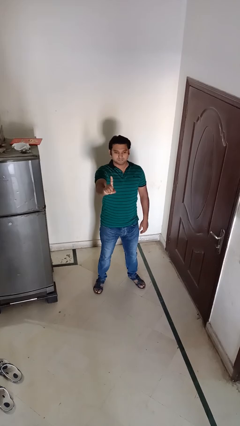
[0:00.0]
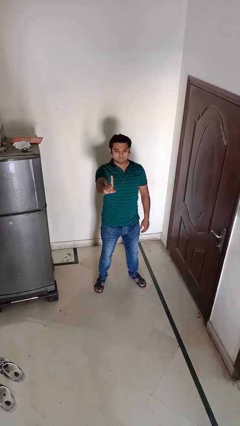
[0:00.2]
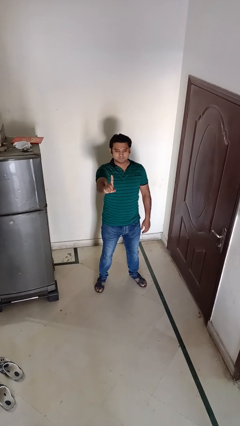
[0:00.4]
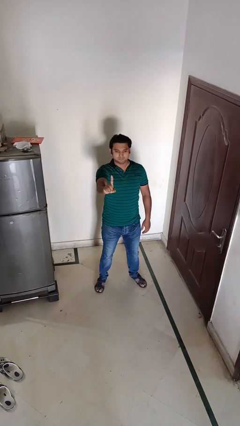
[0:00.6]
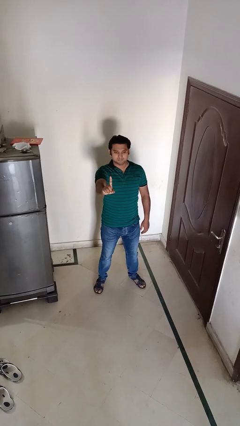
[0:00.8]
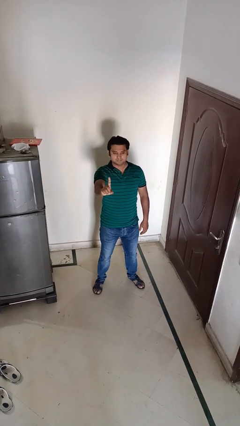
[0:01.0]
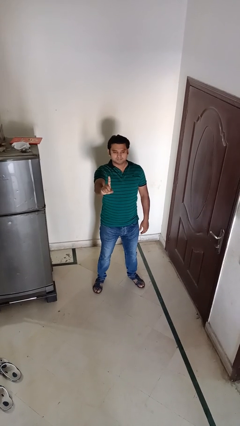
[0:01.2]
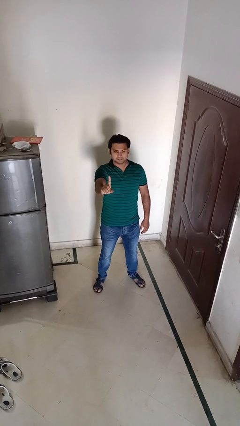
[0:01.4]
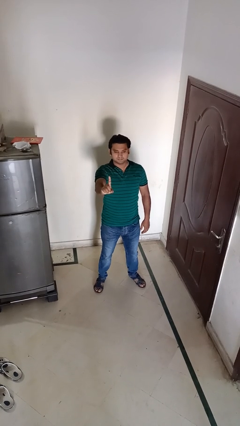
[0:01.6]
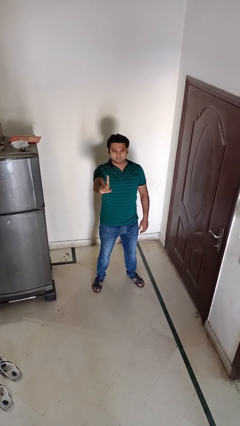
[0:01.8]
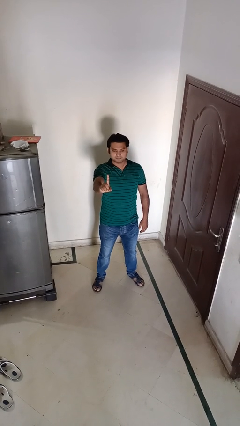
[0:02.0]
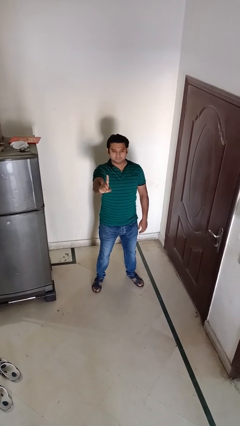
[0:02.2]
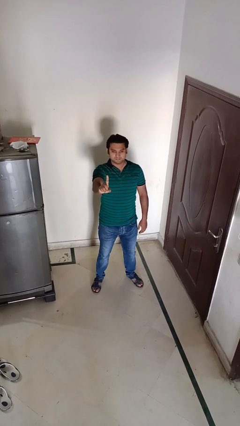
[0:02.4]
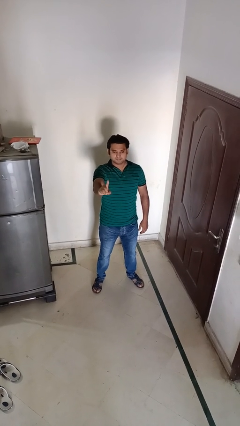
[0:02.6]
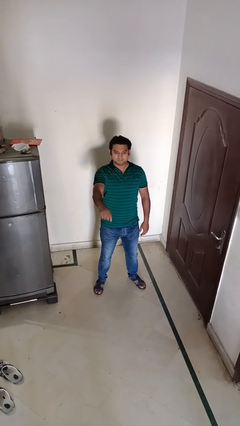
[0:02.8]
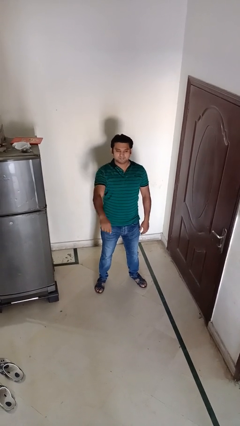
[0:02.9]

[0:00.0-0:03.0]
person gestures number one

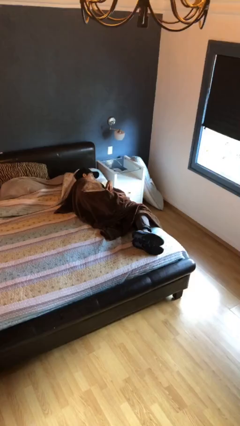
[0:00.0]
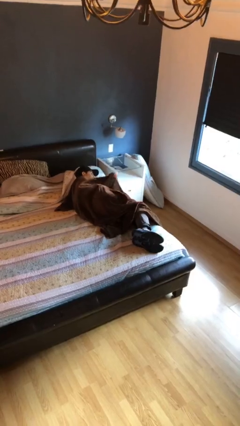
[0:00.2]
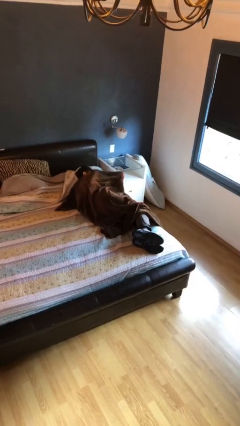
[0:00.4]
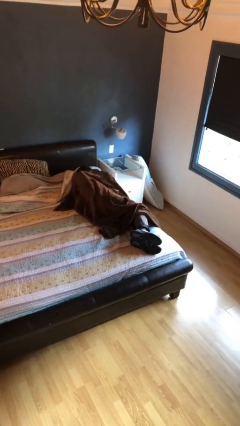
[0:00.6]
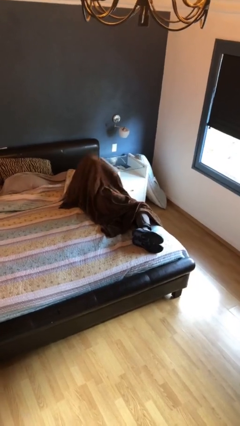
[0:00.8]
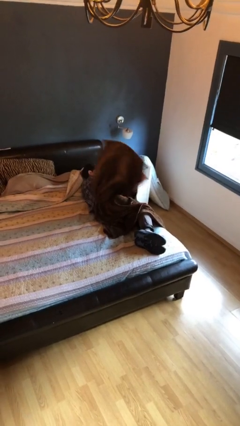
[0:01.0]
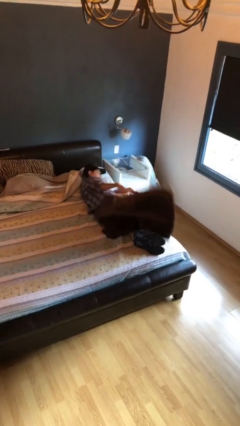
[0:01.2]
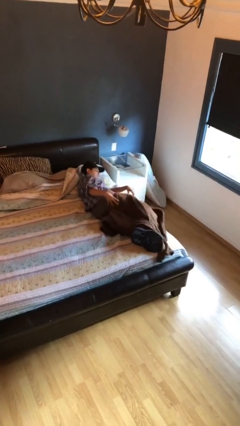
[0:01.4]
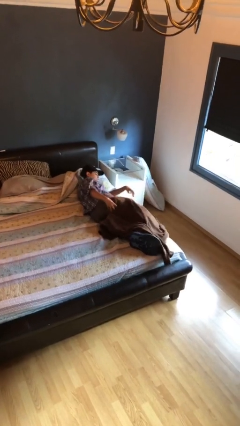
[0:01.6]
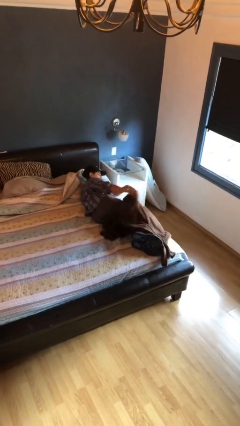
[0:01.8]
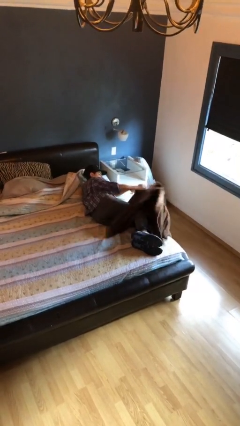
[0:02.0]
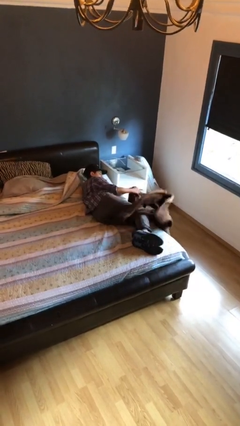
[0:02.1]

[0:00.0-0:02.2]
person uncovers with blanket

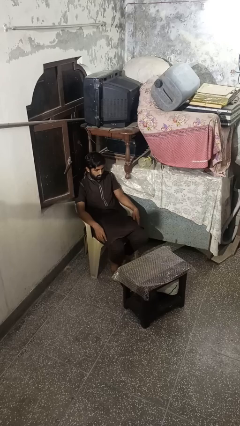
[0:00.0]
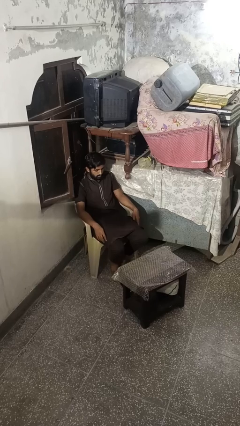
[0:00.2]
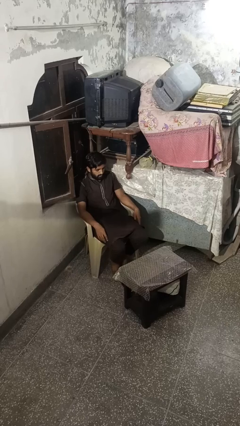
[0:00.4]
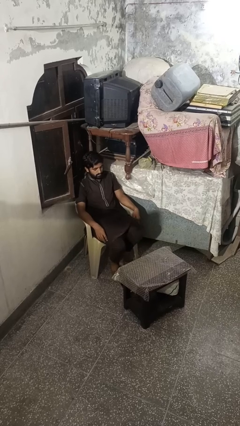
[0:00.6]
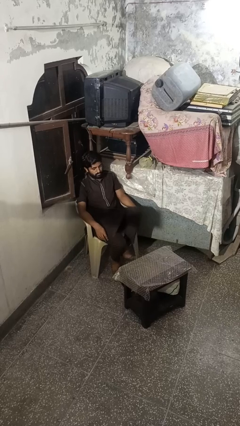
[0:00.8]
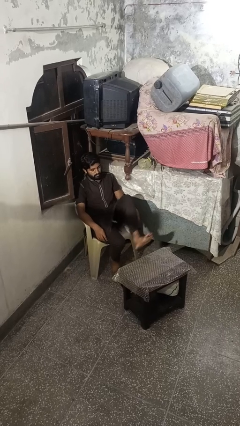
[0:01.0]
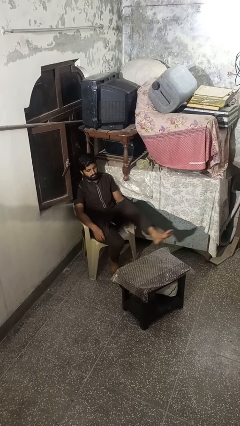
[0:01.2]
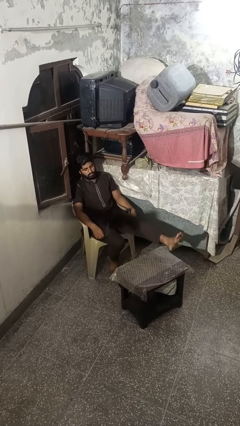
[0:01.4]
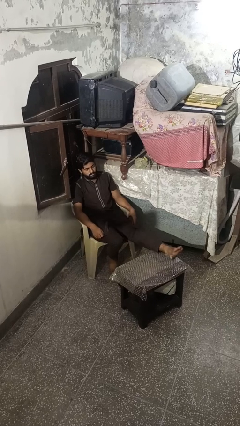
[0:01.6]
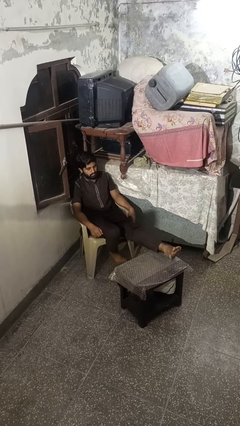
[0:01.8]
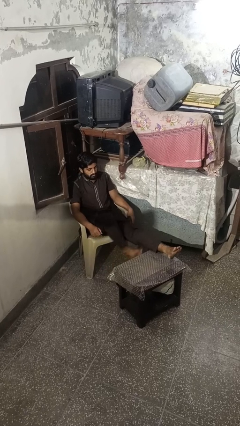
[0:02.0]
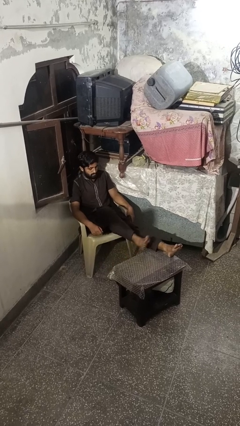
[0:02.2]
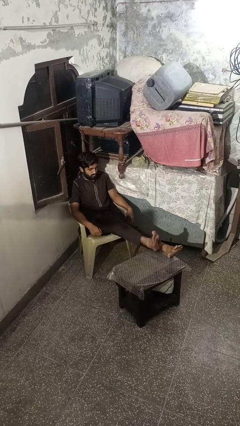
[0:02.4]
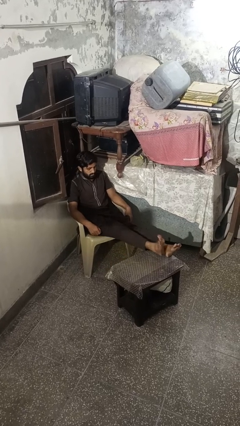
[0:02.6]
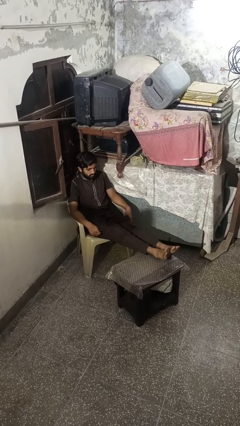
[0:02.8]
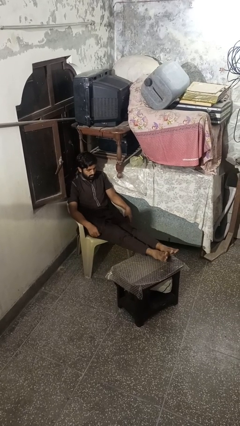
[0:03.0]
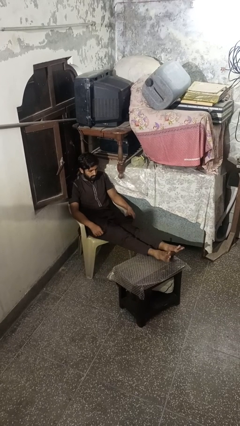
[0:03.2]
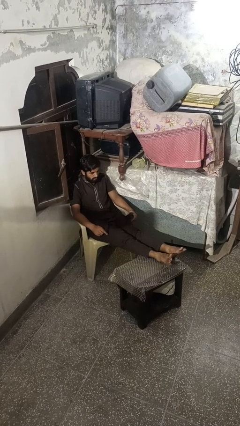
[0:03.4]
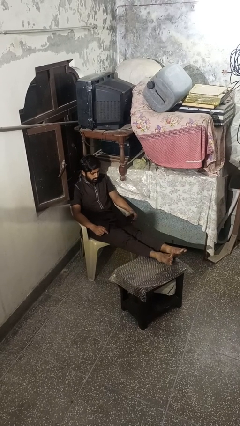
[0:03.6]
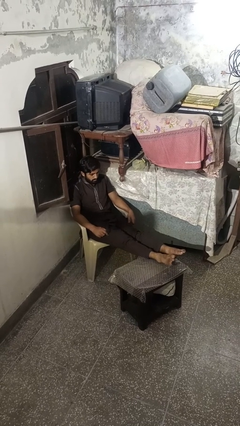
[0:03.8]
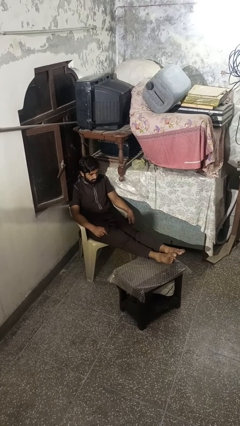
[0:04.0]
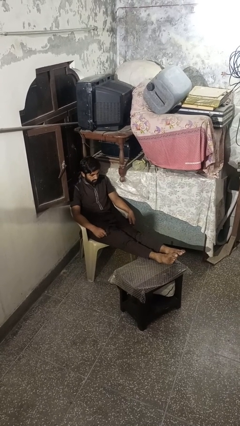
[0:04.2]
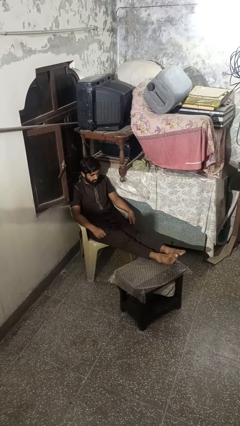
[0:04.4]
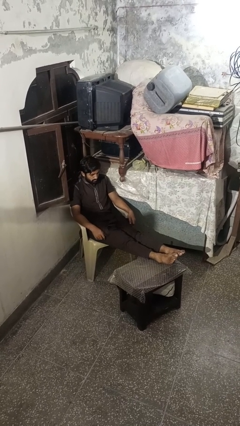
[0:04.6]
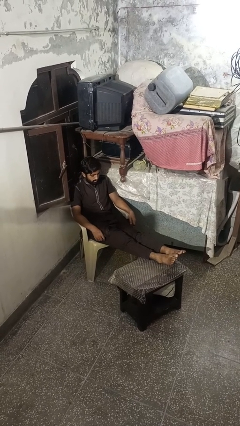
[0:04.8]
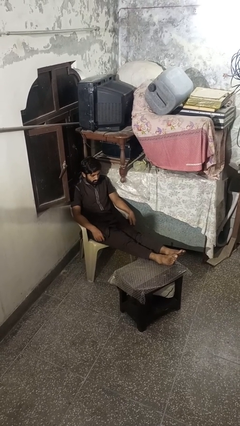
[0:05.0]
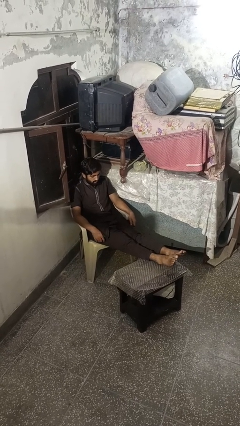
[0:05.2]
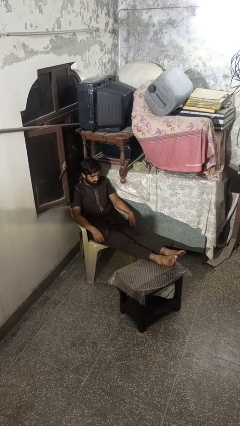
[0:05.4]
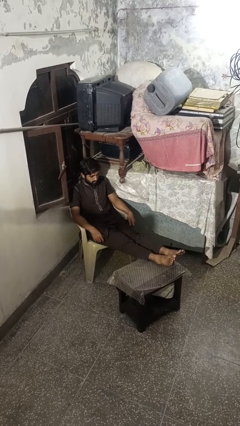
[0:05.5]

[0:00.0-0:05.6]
person puts feet up

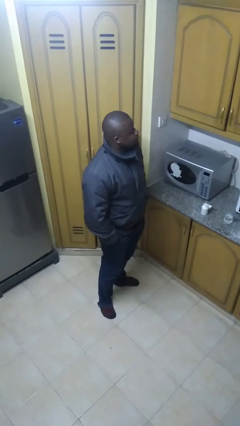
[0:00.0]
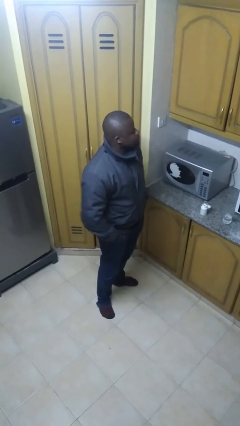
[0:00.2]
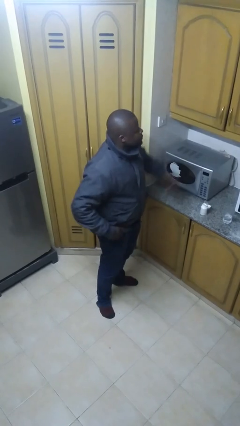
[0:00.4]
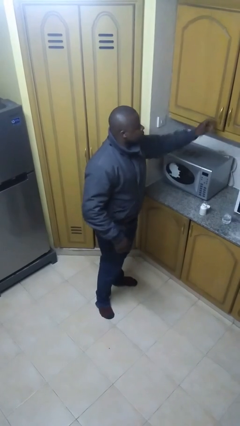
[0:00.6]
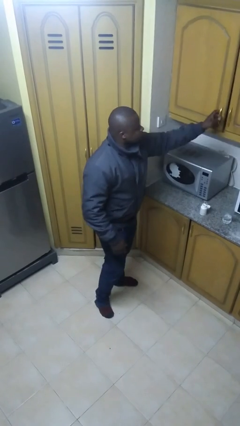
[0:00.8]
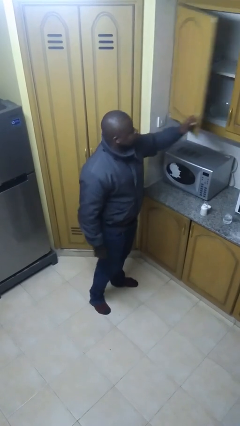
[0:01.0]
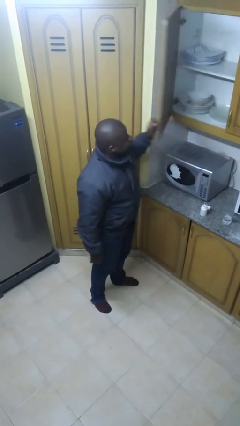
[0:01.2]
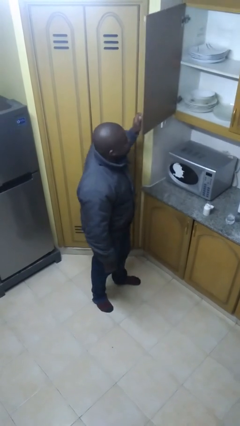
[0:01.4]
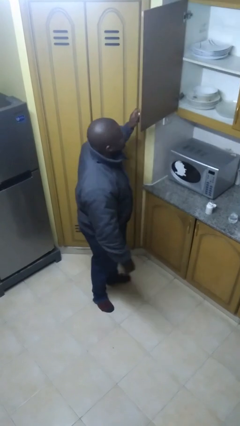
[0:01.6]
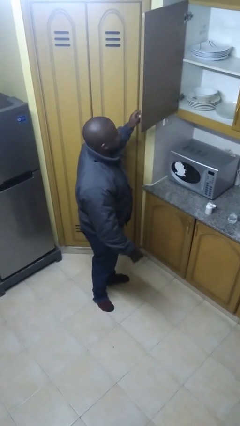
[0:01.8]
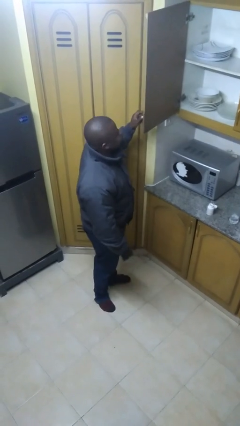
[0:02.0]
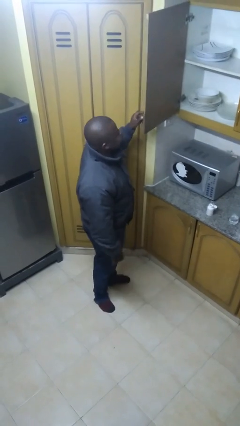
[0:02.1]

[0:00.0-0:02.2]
person closes cabinet

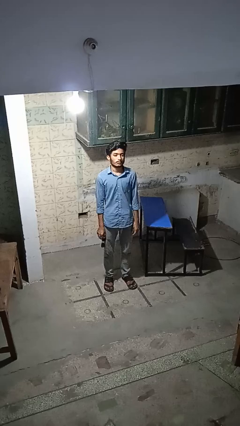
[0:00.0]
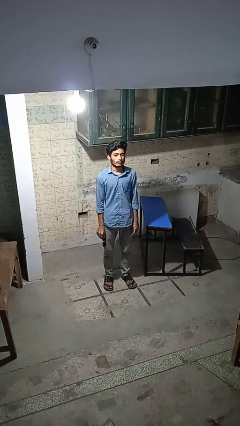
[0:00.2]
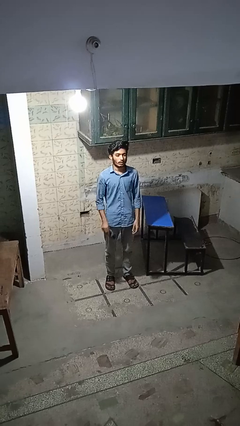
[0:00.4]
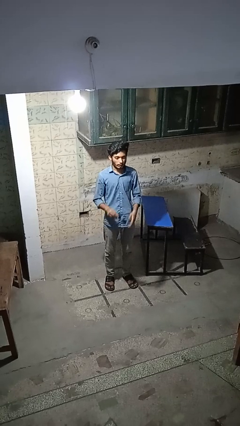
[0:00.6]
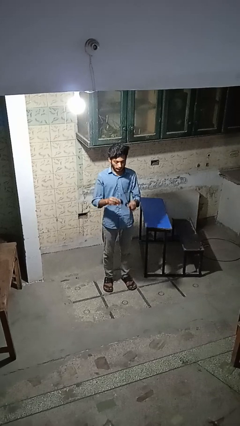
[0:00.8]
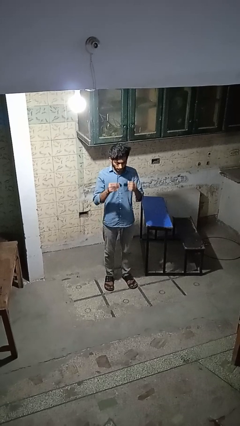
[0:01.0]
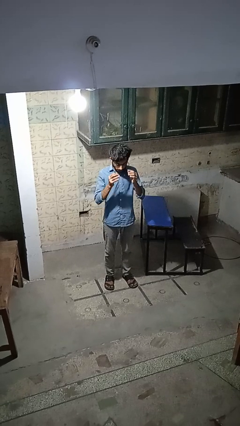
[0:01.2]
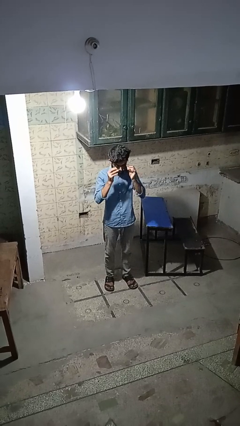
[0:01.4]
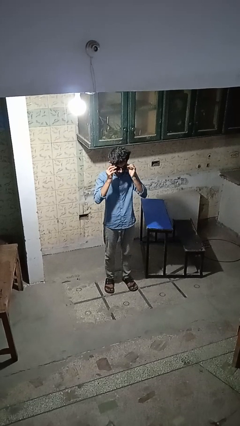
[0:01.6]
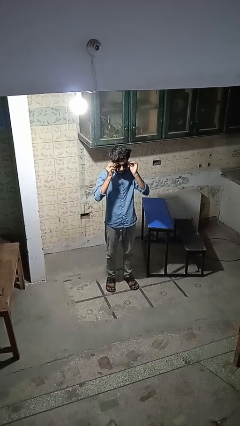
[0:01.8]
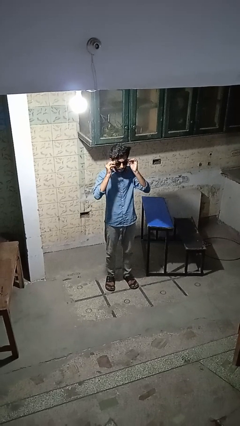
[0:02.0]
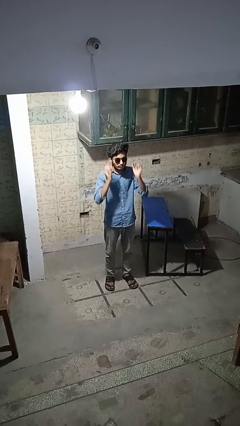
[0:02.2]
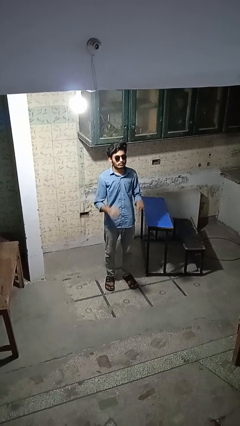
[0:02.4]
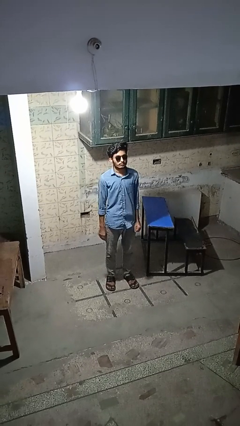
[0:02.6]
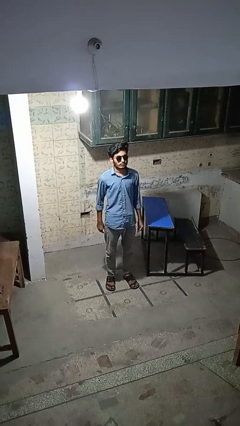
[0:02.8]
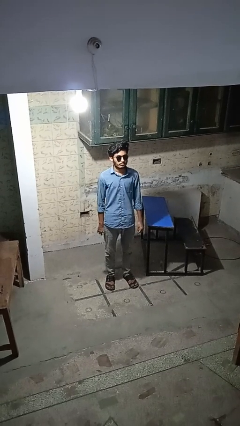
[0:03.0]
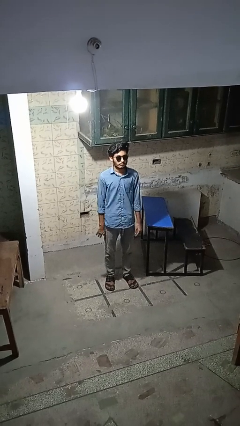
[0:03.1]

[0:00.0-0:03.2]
person puts on sunglasses

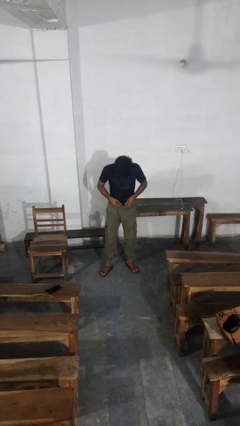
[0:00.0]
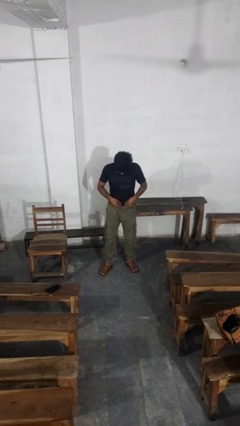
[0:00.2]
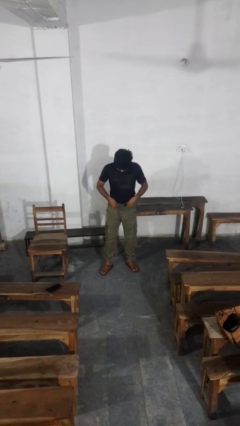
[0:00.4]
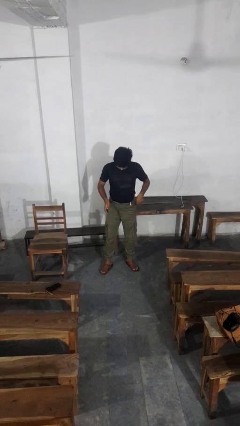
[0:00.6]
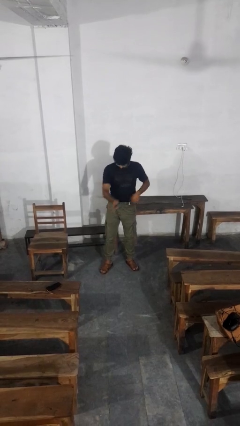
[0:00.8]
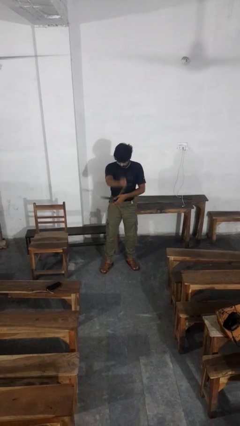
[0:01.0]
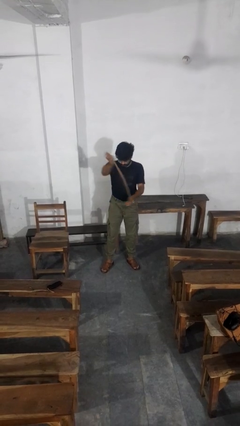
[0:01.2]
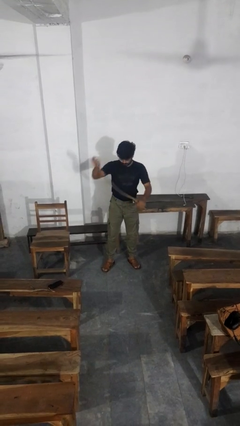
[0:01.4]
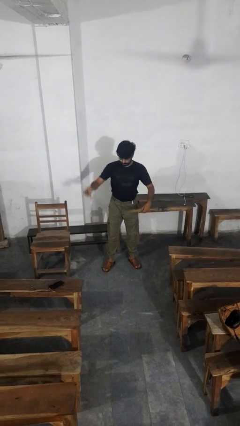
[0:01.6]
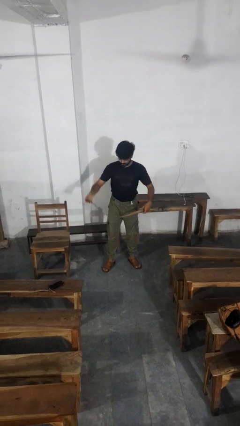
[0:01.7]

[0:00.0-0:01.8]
person takes off belt
